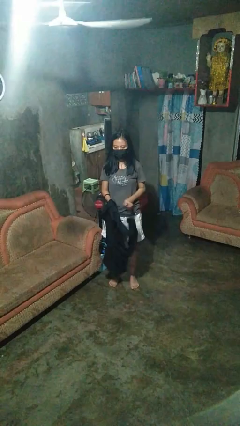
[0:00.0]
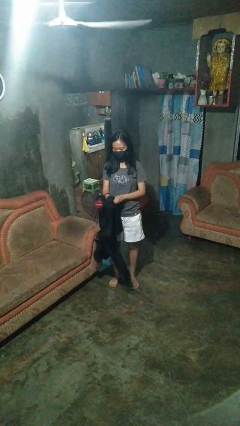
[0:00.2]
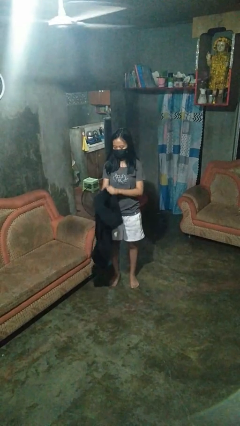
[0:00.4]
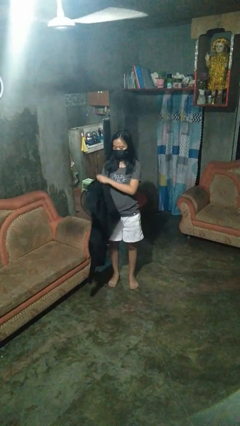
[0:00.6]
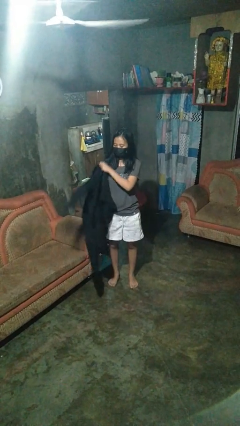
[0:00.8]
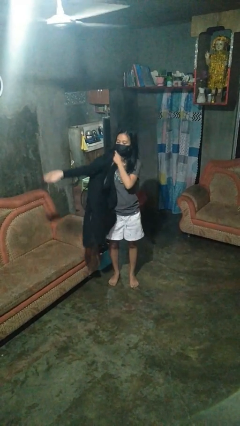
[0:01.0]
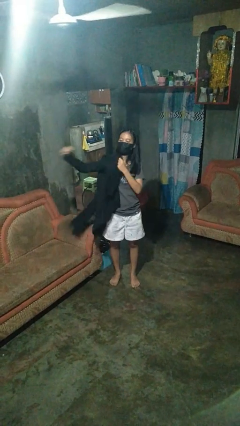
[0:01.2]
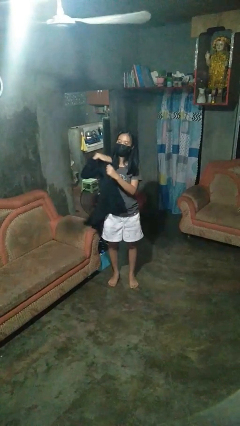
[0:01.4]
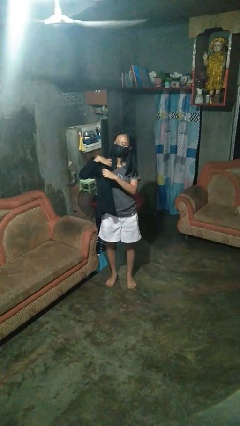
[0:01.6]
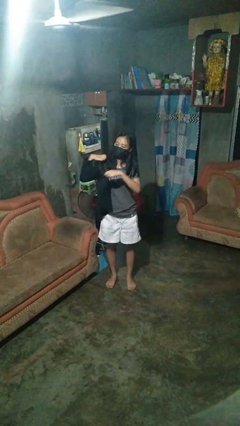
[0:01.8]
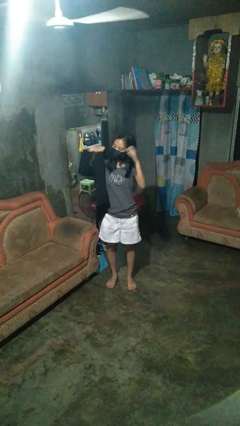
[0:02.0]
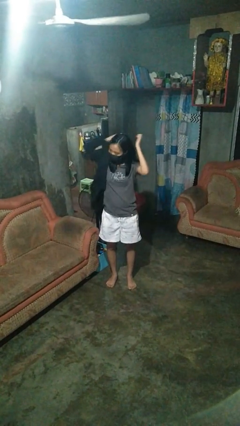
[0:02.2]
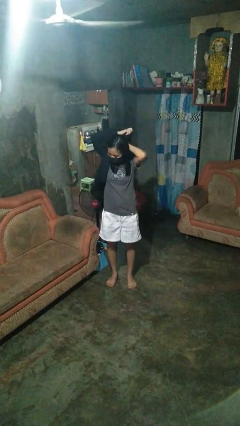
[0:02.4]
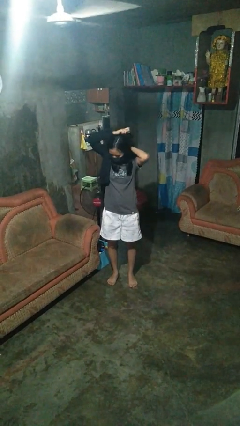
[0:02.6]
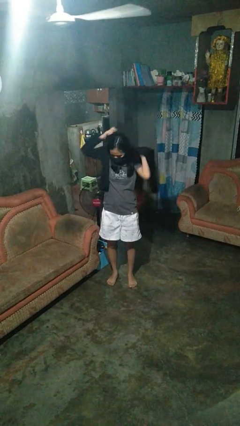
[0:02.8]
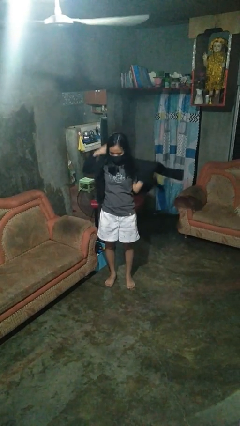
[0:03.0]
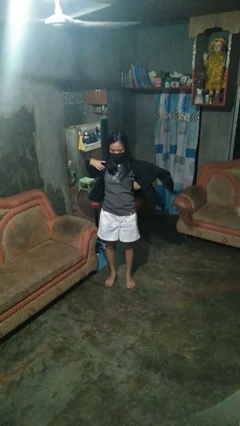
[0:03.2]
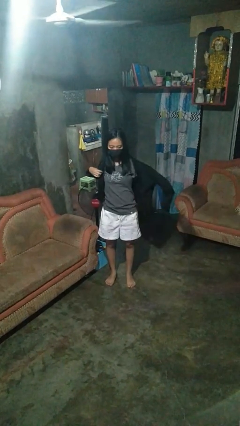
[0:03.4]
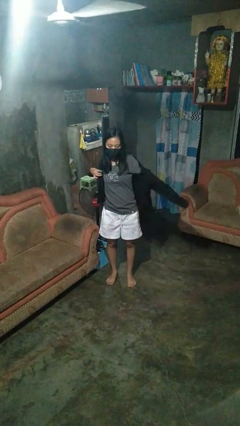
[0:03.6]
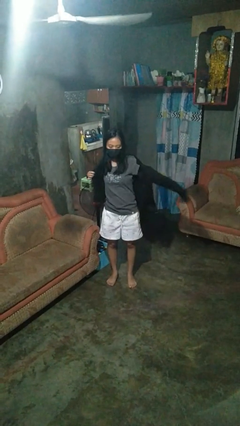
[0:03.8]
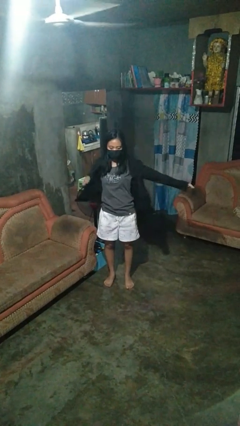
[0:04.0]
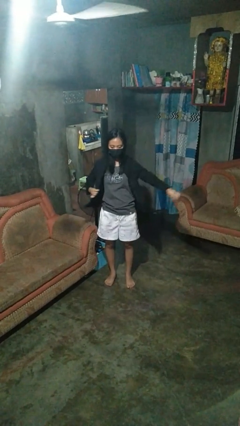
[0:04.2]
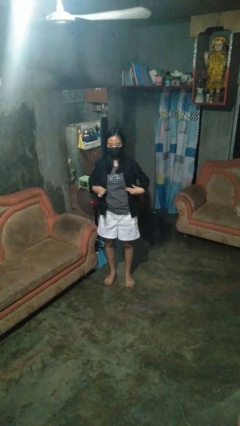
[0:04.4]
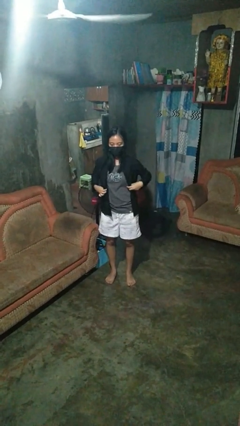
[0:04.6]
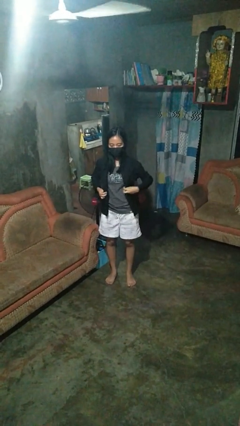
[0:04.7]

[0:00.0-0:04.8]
person puts on shirt

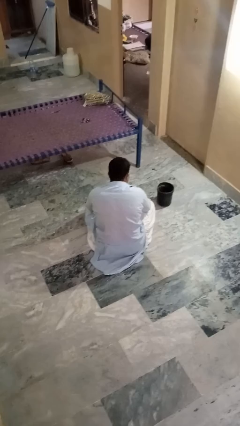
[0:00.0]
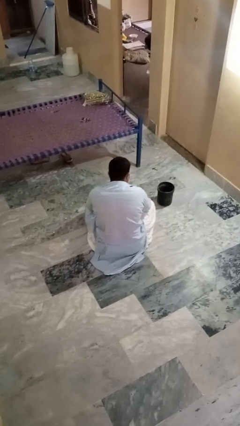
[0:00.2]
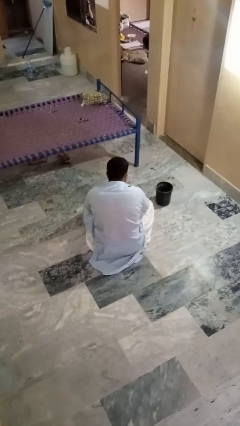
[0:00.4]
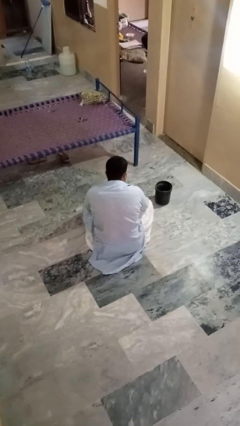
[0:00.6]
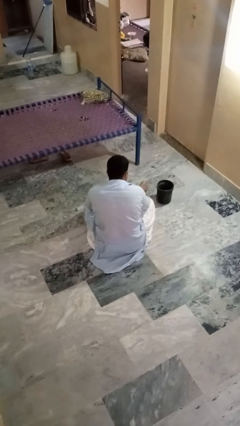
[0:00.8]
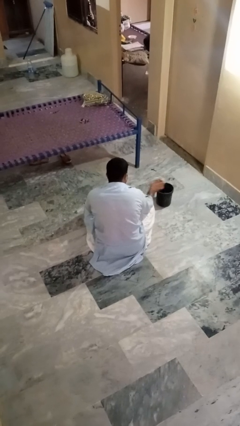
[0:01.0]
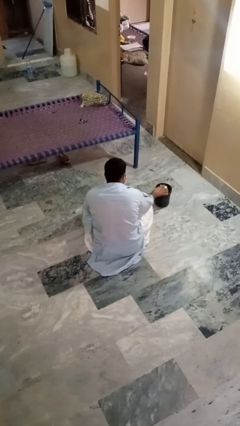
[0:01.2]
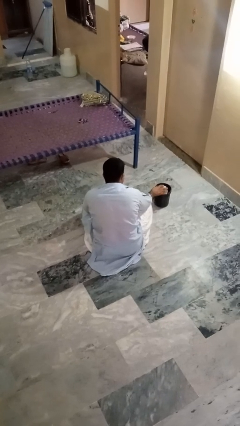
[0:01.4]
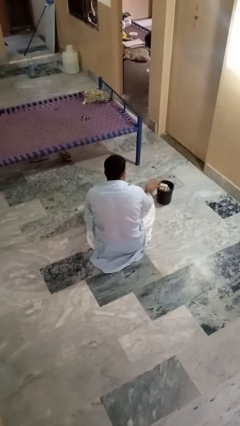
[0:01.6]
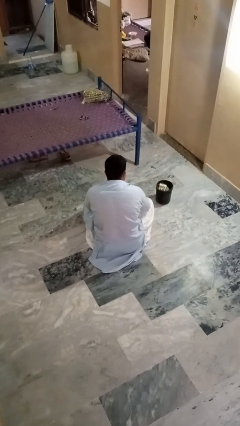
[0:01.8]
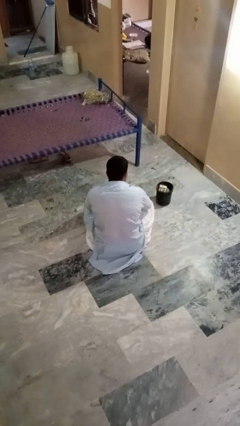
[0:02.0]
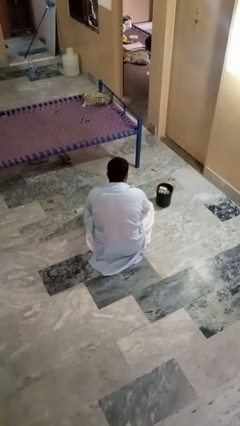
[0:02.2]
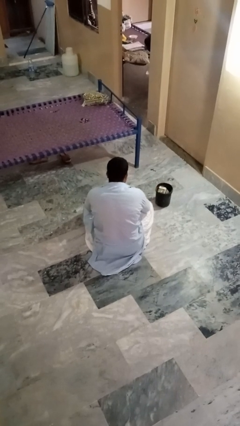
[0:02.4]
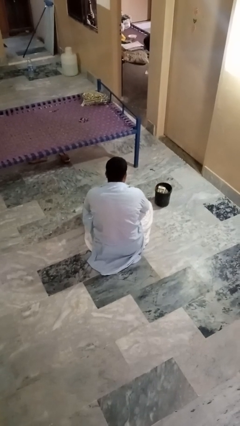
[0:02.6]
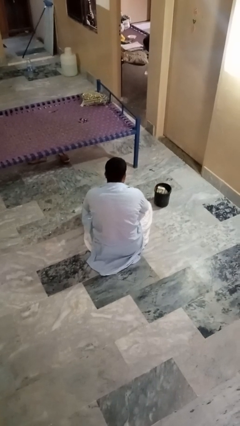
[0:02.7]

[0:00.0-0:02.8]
person puts object into basket

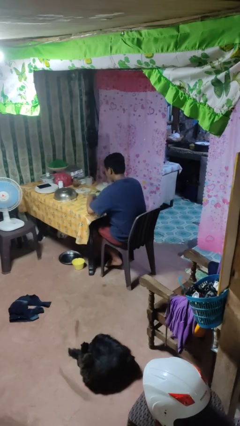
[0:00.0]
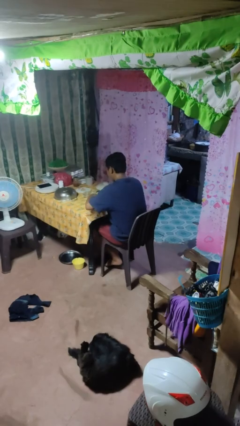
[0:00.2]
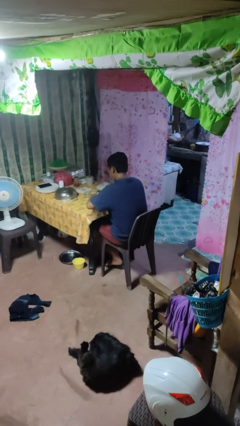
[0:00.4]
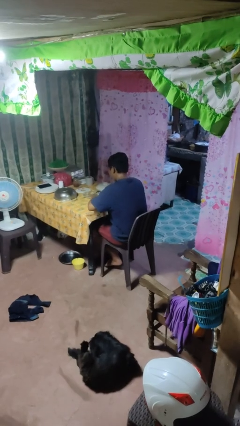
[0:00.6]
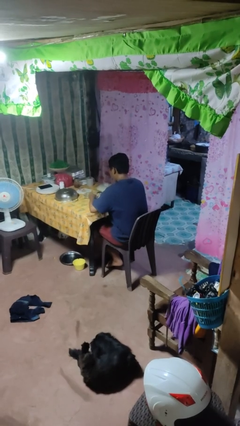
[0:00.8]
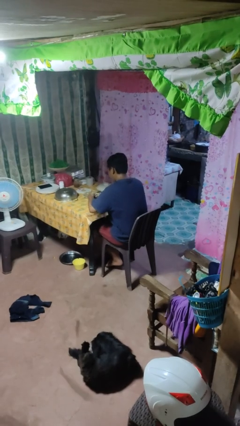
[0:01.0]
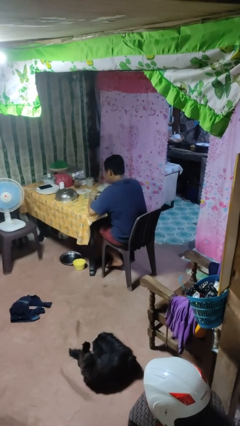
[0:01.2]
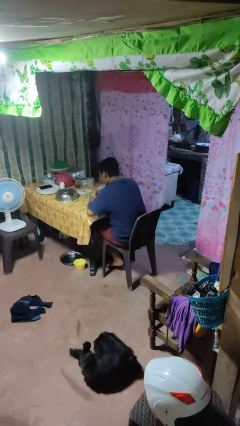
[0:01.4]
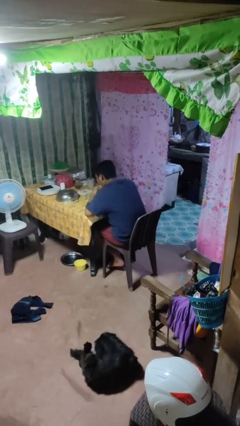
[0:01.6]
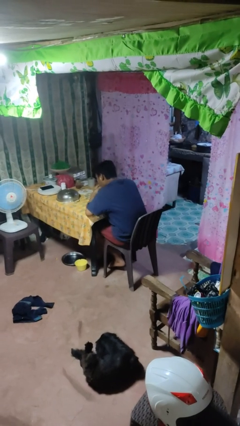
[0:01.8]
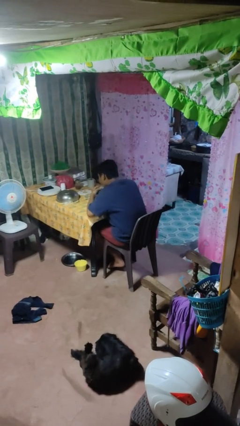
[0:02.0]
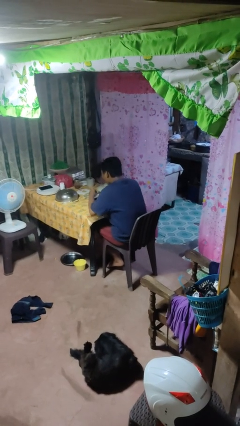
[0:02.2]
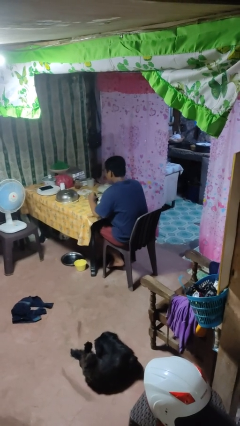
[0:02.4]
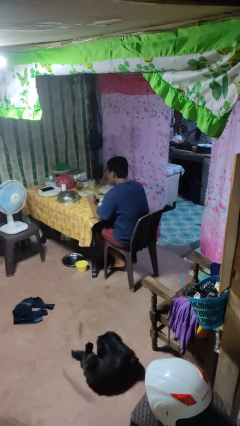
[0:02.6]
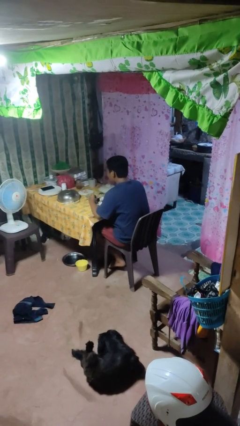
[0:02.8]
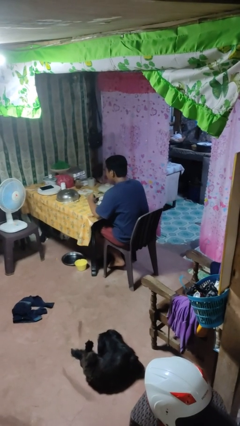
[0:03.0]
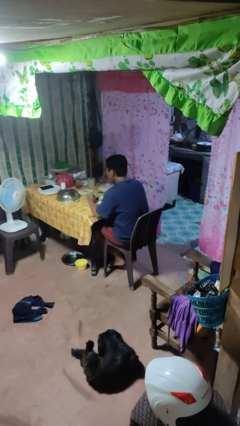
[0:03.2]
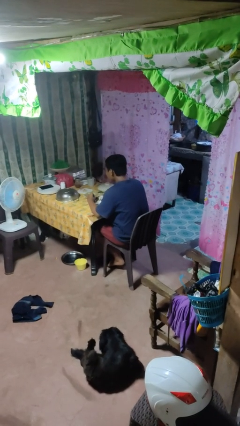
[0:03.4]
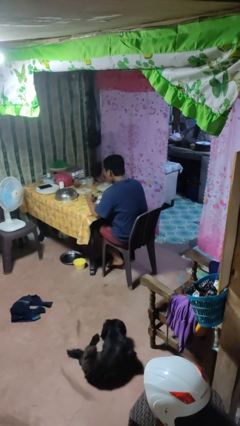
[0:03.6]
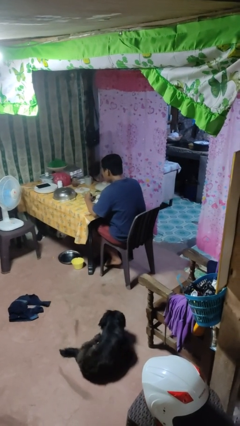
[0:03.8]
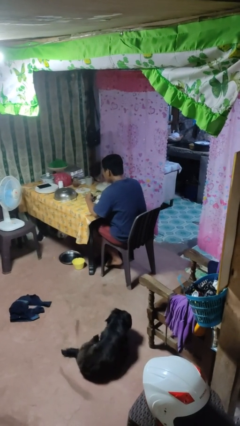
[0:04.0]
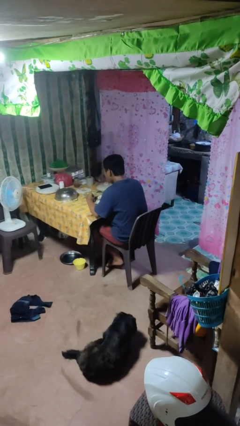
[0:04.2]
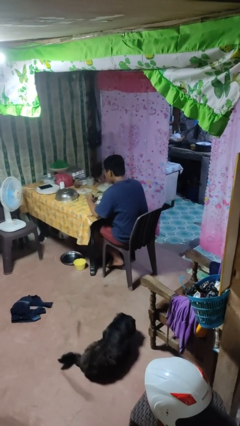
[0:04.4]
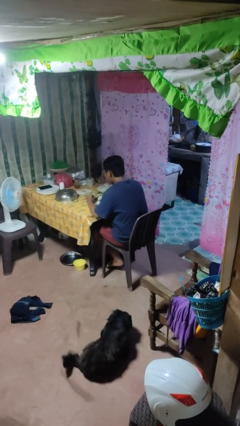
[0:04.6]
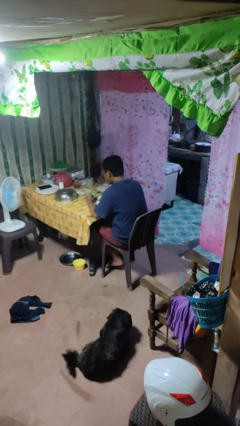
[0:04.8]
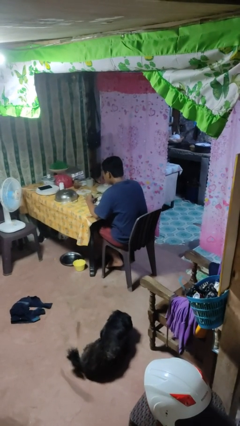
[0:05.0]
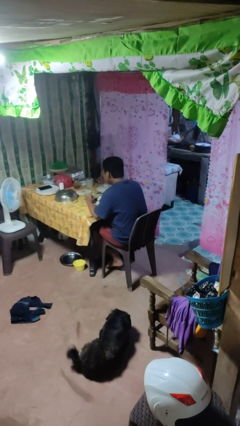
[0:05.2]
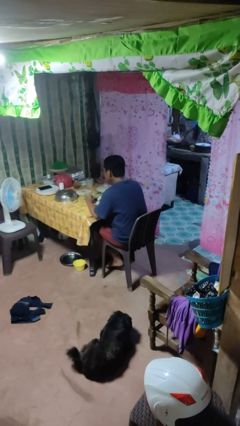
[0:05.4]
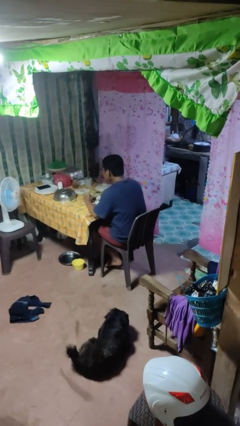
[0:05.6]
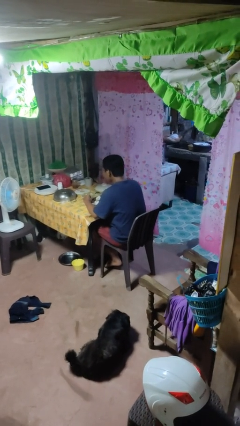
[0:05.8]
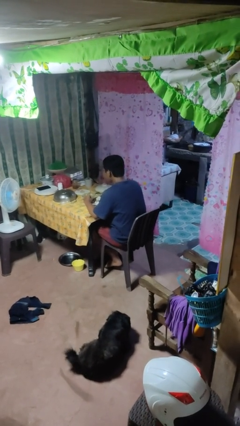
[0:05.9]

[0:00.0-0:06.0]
person eats with hands

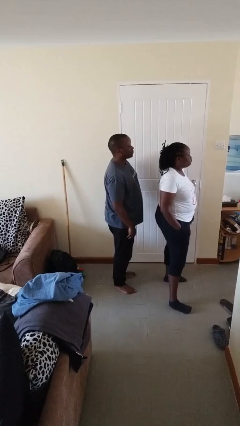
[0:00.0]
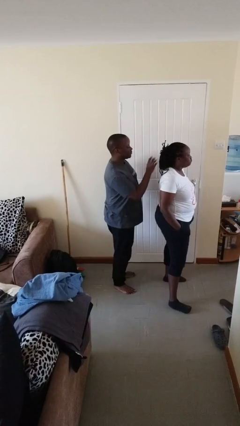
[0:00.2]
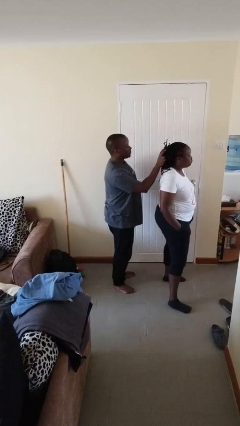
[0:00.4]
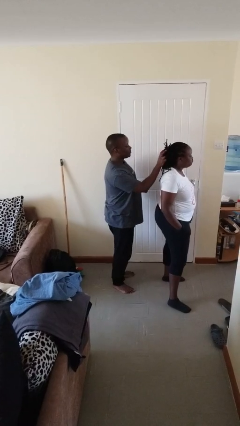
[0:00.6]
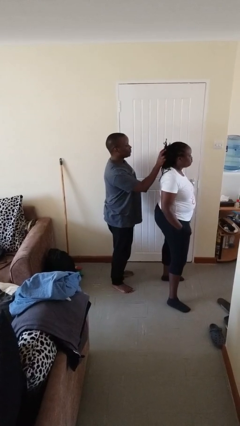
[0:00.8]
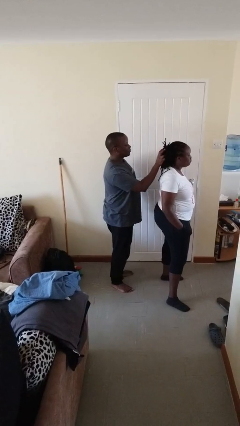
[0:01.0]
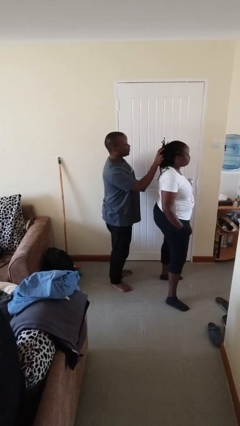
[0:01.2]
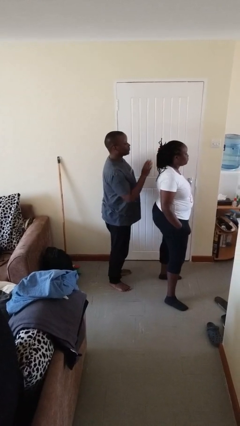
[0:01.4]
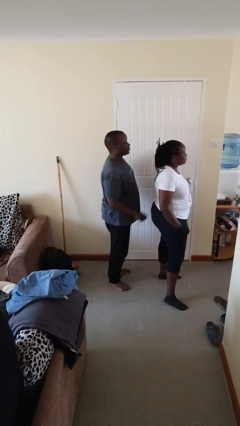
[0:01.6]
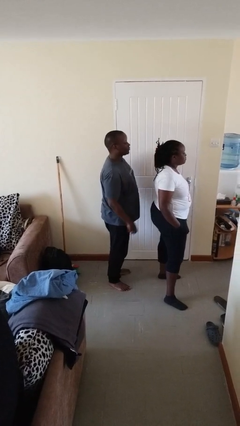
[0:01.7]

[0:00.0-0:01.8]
person grabs person by hair

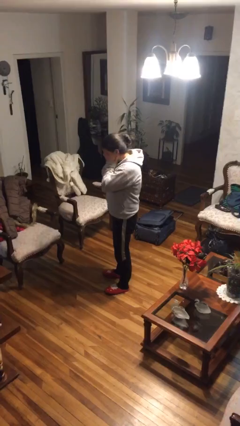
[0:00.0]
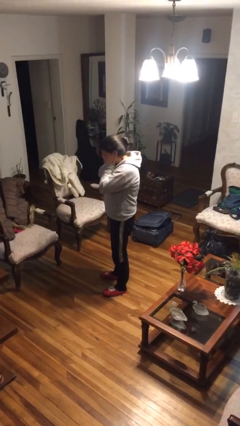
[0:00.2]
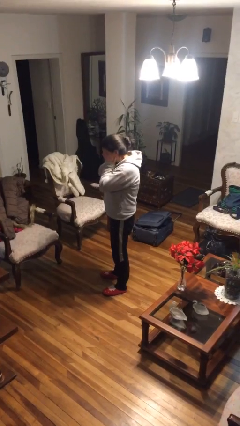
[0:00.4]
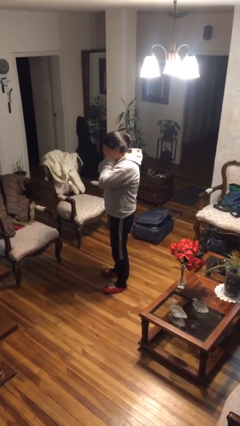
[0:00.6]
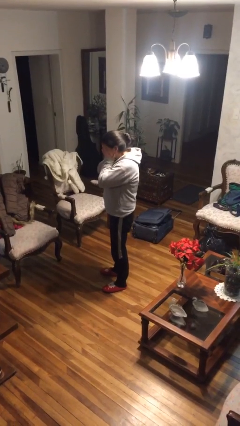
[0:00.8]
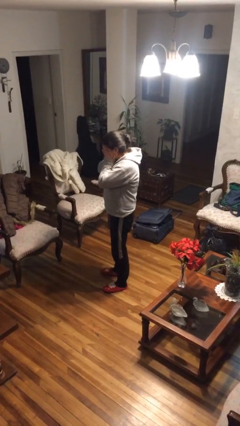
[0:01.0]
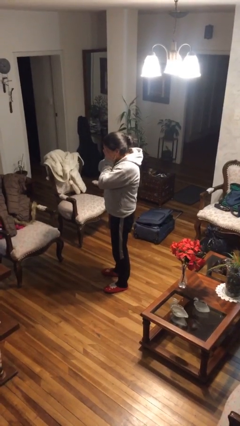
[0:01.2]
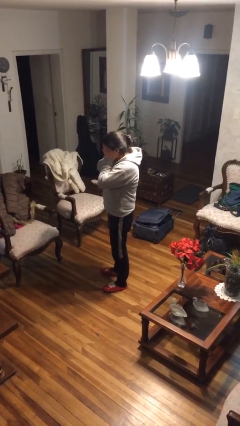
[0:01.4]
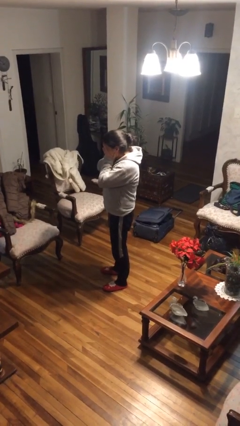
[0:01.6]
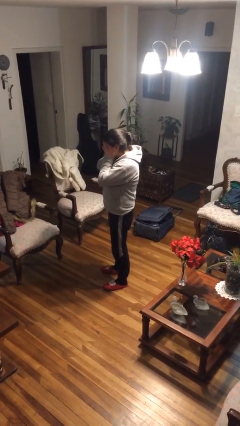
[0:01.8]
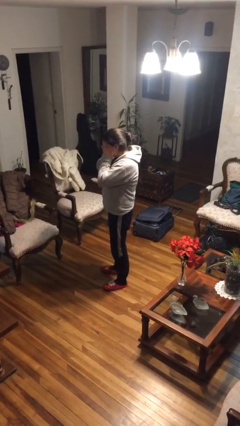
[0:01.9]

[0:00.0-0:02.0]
person covers face with hands
